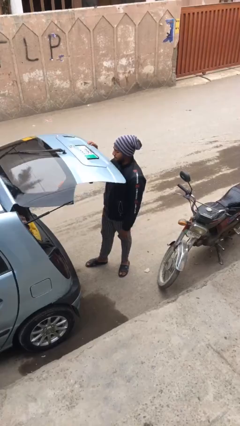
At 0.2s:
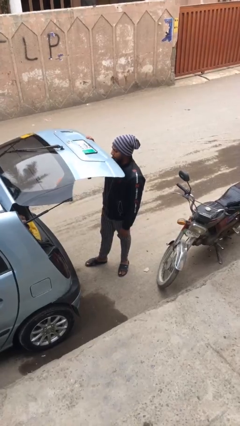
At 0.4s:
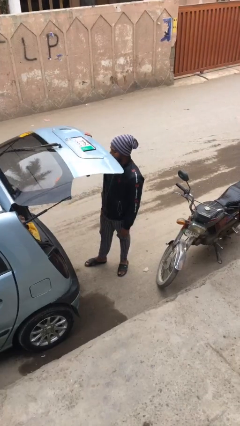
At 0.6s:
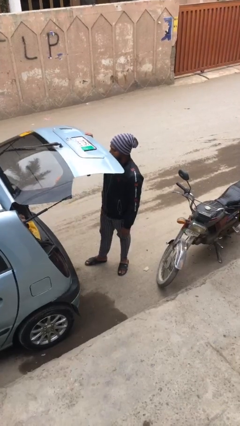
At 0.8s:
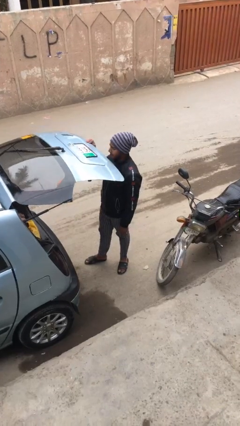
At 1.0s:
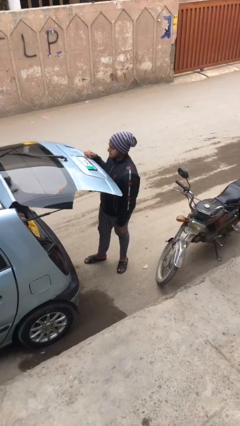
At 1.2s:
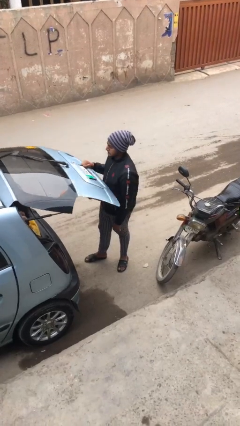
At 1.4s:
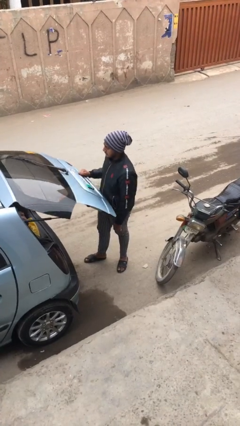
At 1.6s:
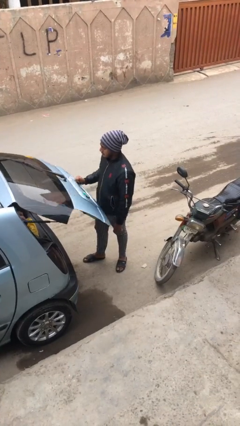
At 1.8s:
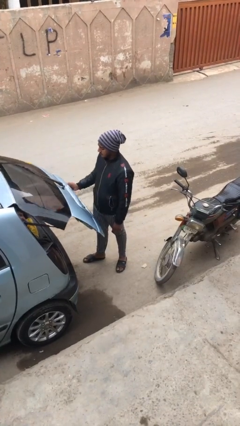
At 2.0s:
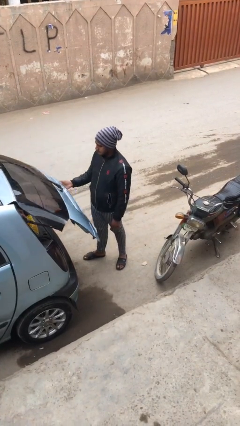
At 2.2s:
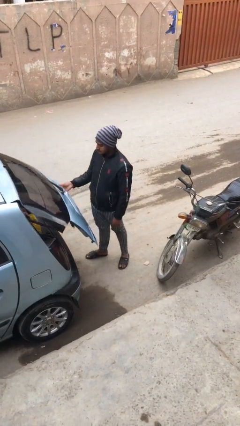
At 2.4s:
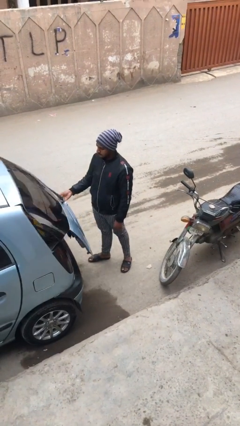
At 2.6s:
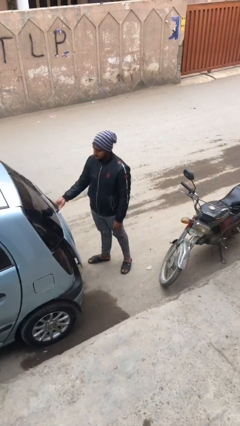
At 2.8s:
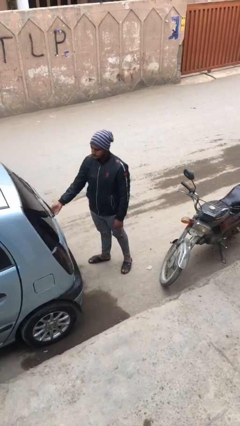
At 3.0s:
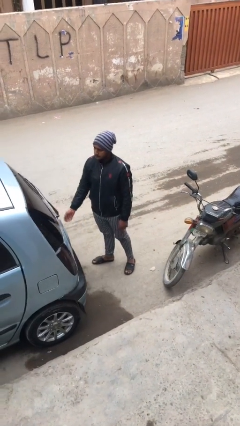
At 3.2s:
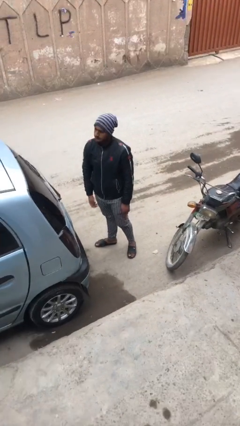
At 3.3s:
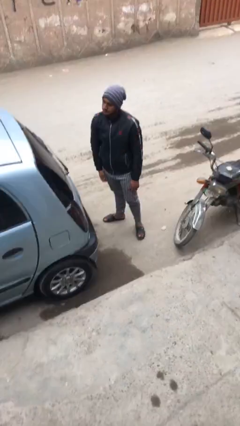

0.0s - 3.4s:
person closes car trunk

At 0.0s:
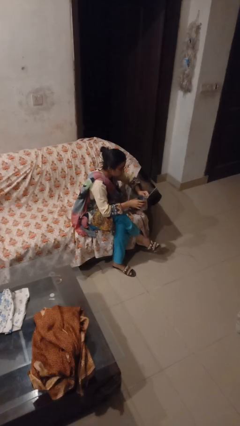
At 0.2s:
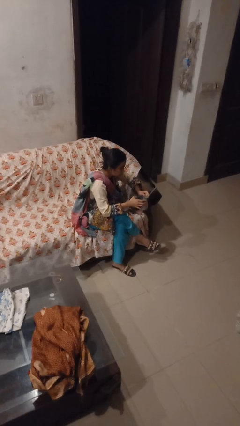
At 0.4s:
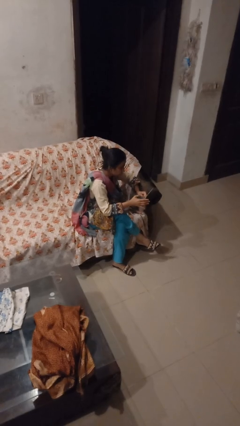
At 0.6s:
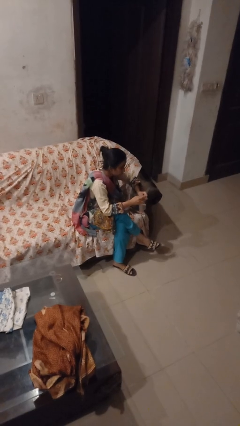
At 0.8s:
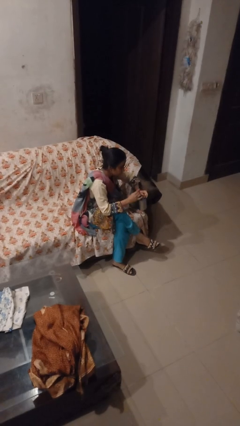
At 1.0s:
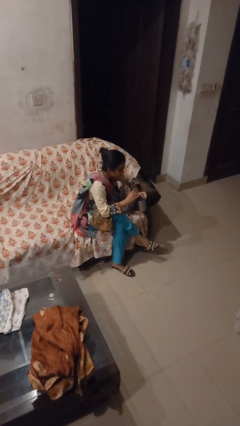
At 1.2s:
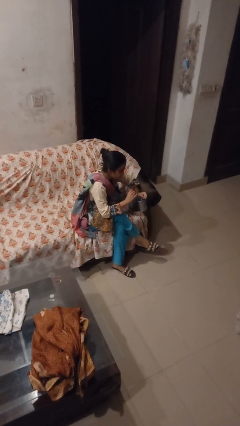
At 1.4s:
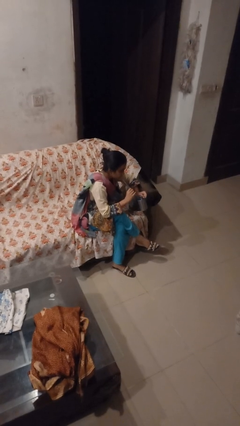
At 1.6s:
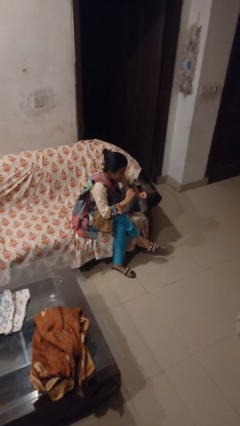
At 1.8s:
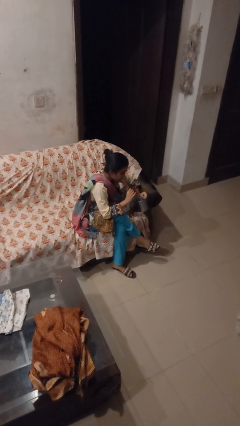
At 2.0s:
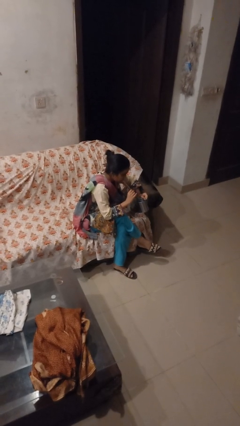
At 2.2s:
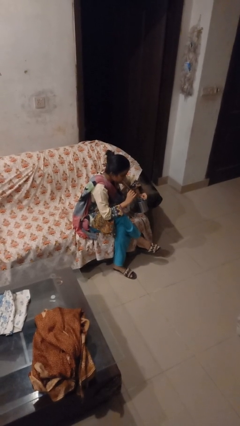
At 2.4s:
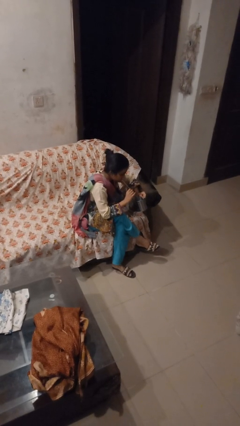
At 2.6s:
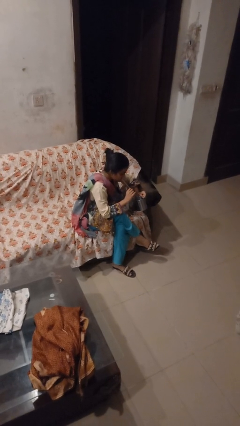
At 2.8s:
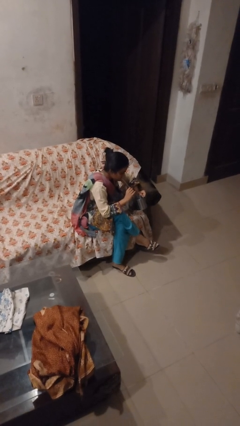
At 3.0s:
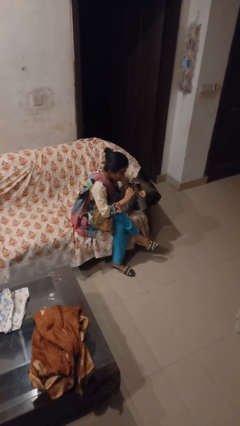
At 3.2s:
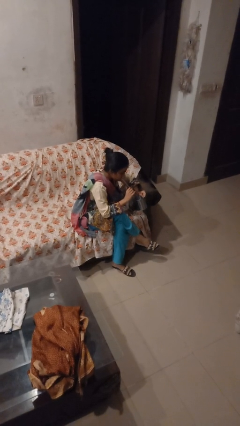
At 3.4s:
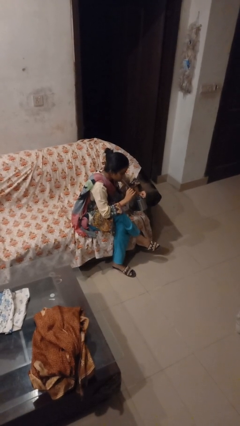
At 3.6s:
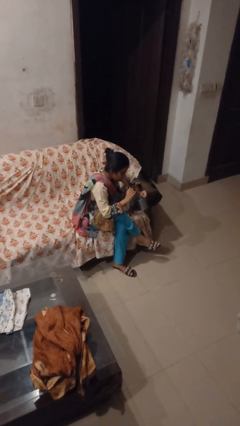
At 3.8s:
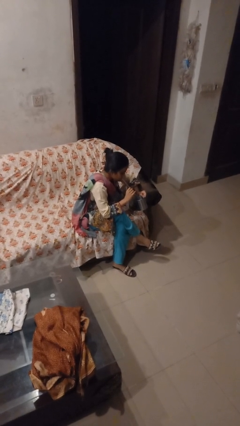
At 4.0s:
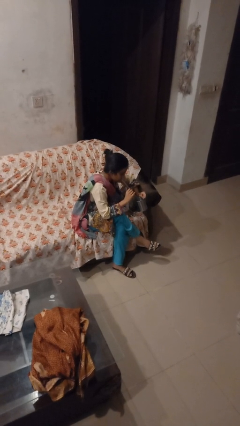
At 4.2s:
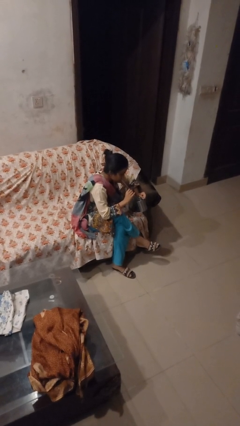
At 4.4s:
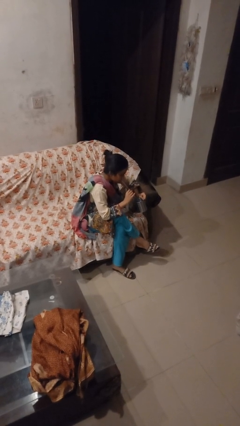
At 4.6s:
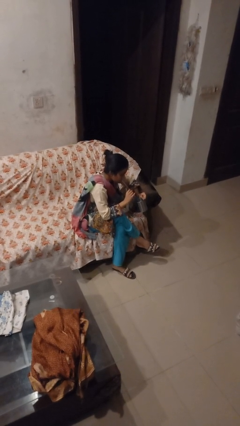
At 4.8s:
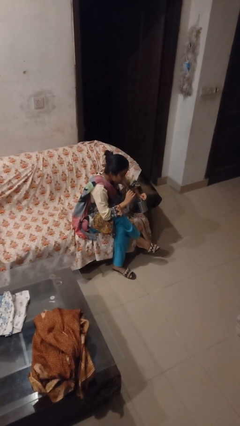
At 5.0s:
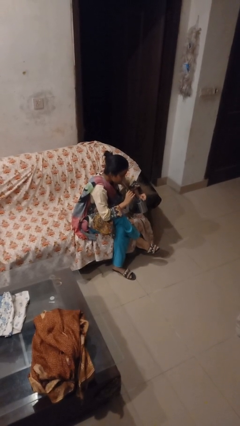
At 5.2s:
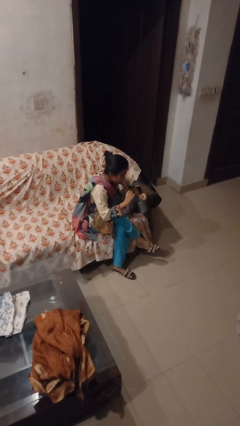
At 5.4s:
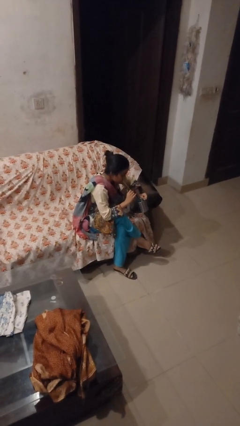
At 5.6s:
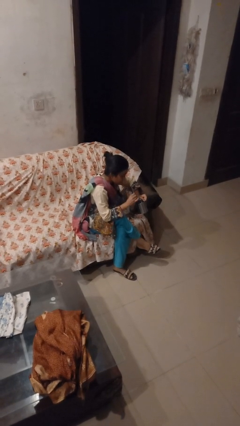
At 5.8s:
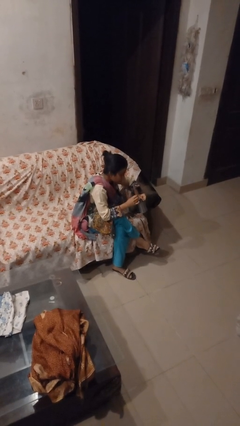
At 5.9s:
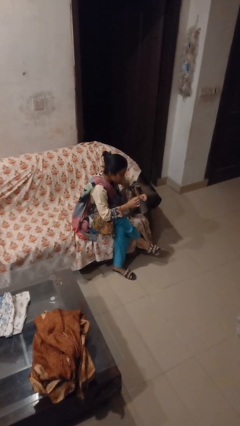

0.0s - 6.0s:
person drinks from straw

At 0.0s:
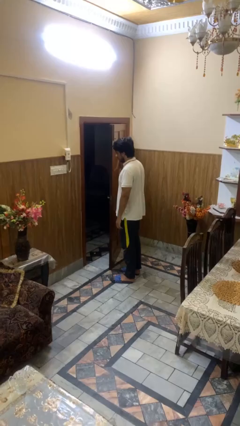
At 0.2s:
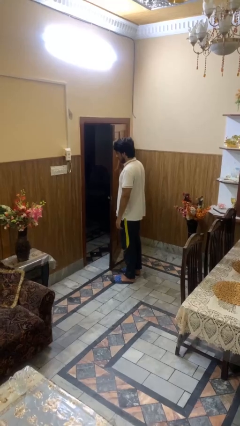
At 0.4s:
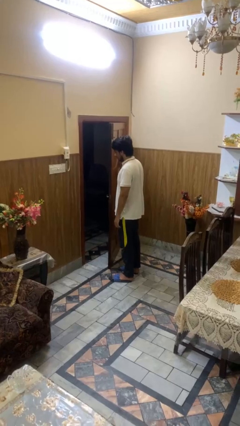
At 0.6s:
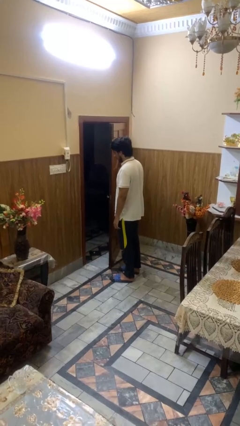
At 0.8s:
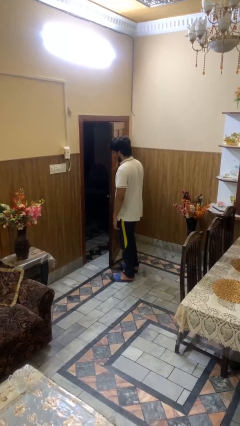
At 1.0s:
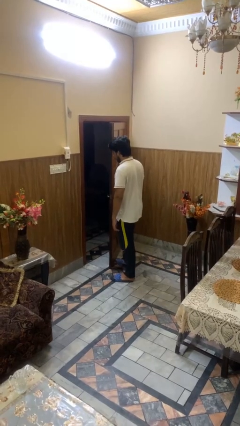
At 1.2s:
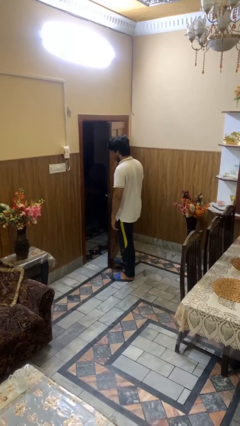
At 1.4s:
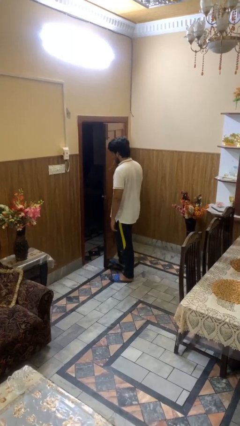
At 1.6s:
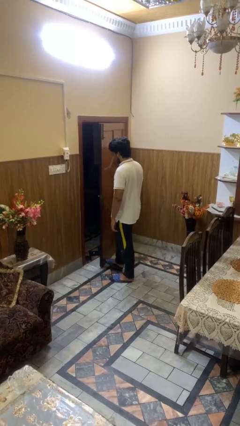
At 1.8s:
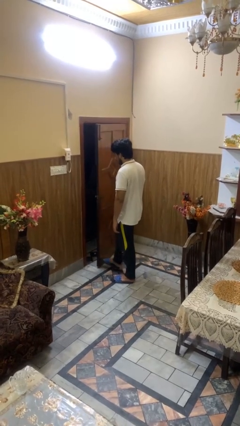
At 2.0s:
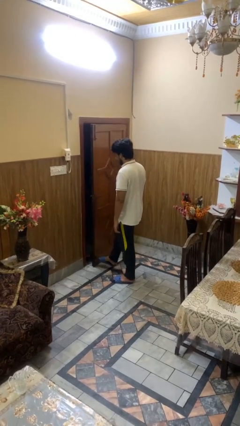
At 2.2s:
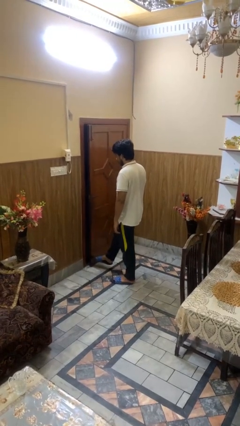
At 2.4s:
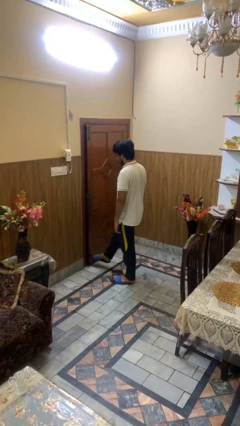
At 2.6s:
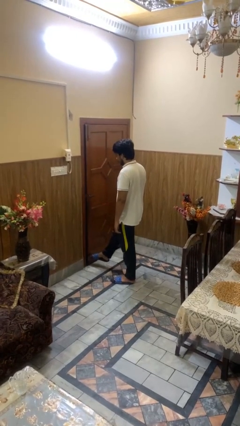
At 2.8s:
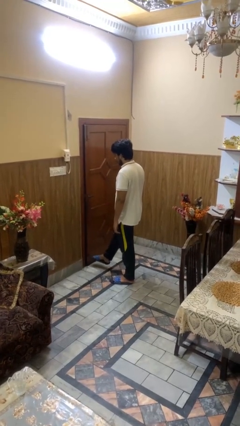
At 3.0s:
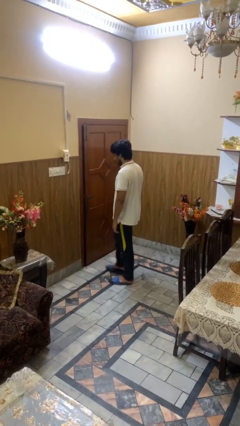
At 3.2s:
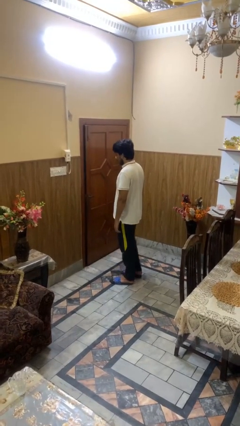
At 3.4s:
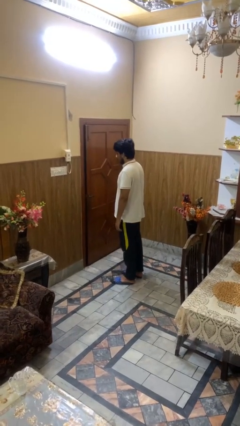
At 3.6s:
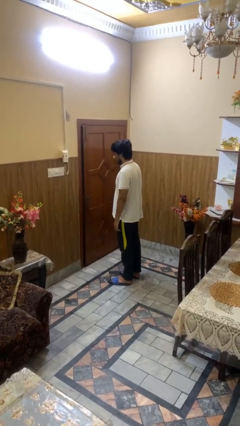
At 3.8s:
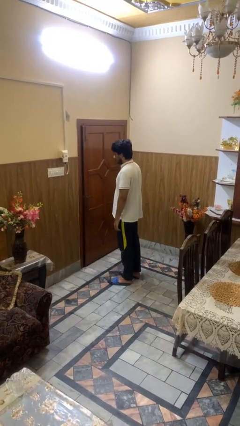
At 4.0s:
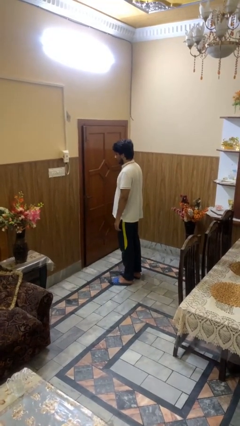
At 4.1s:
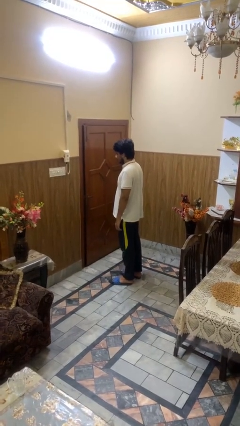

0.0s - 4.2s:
person closes door with foot

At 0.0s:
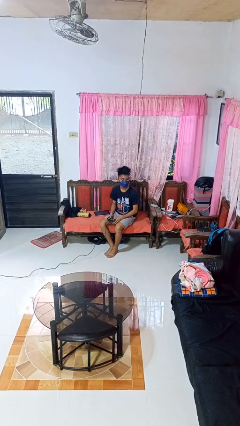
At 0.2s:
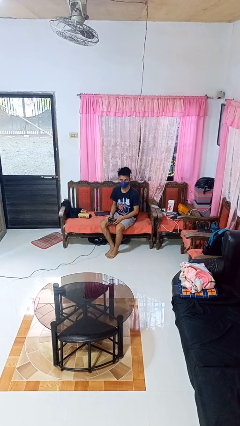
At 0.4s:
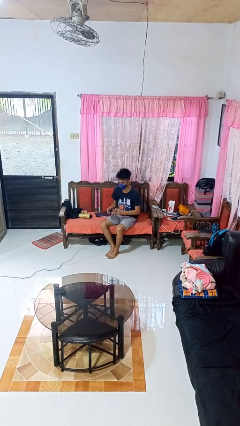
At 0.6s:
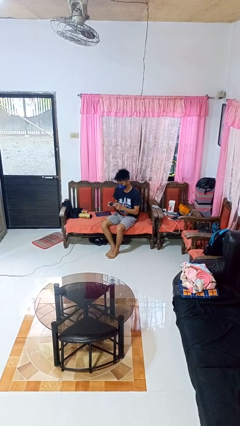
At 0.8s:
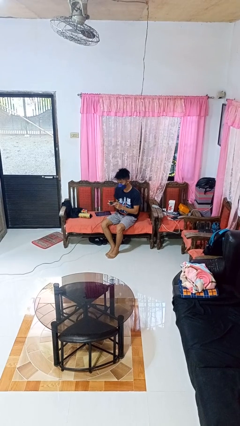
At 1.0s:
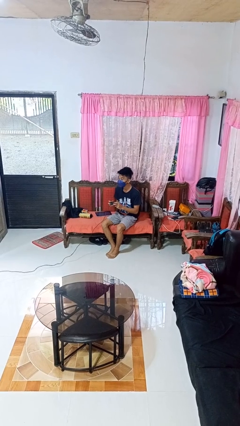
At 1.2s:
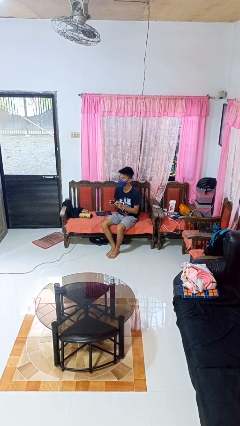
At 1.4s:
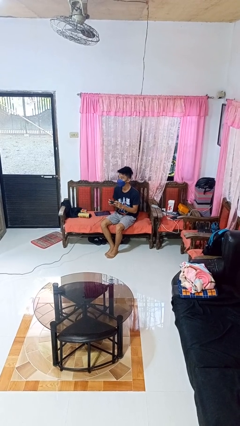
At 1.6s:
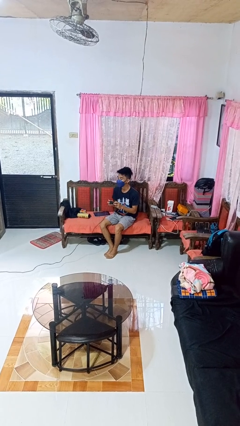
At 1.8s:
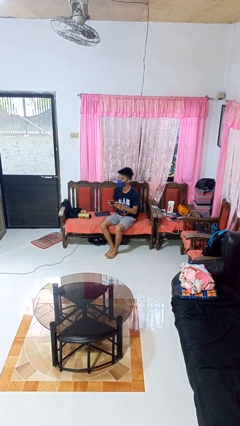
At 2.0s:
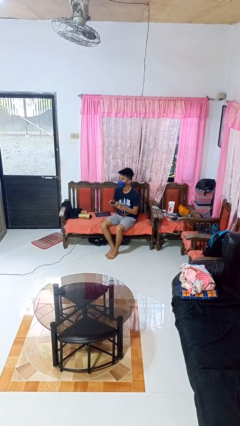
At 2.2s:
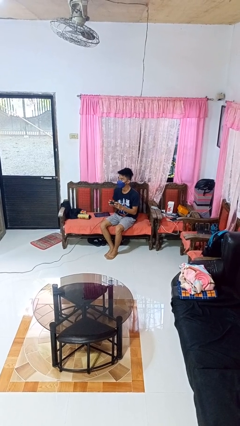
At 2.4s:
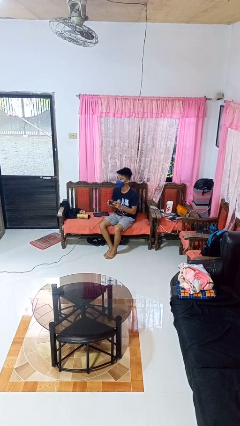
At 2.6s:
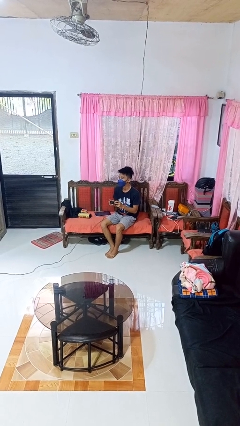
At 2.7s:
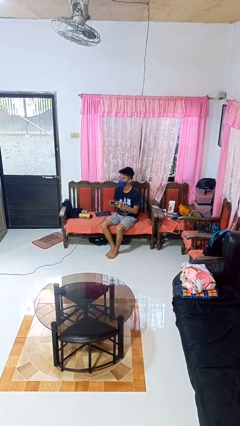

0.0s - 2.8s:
person interacts with handheld game

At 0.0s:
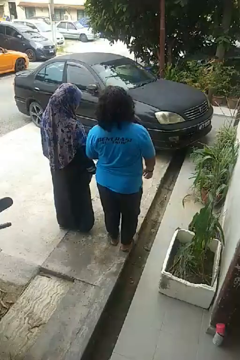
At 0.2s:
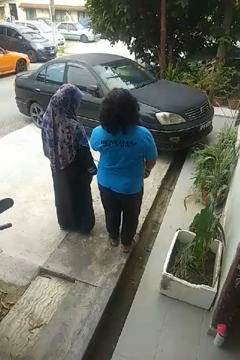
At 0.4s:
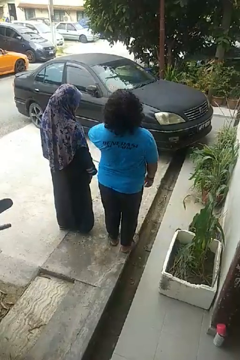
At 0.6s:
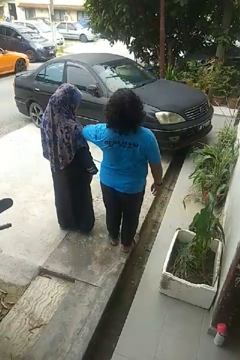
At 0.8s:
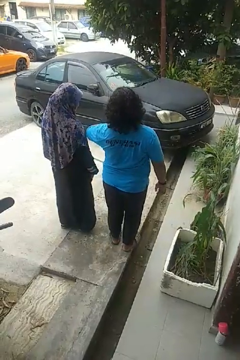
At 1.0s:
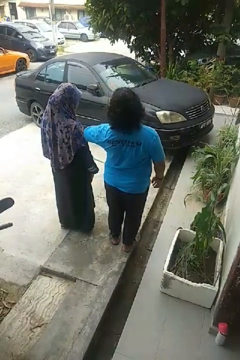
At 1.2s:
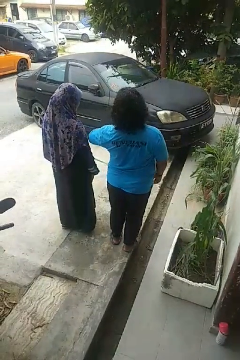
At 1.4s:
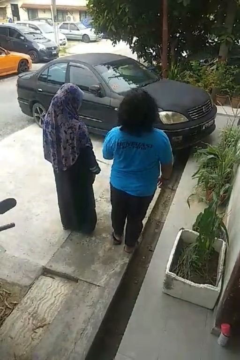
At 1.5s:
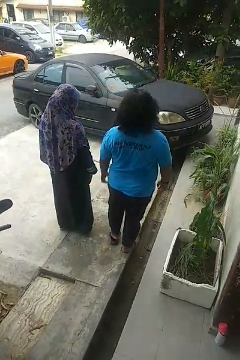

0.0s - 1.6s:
person nudges person with elbow
